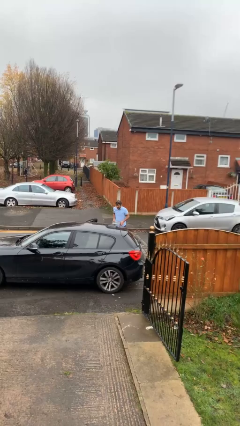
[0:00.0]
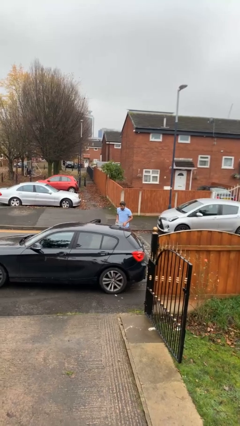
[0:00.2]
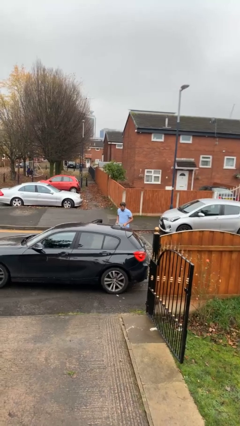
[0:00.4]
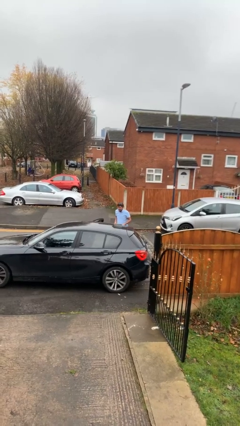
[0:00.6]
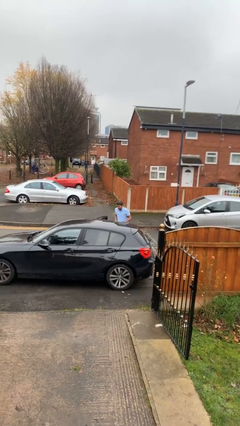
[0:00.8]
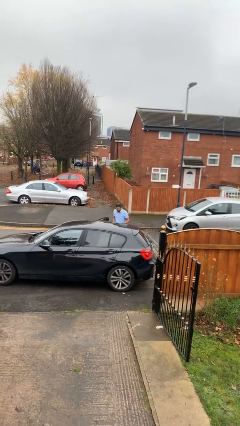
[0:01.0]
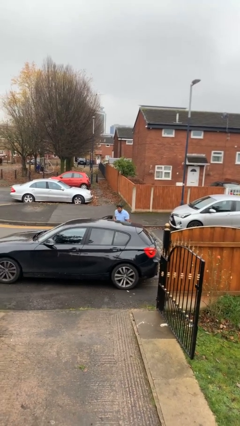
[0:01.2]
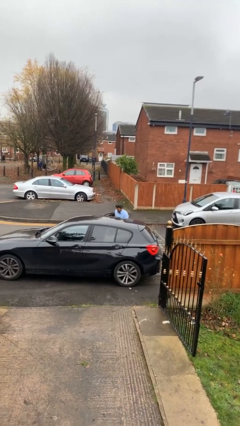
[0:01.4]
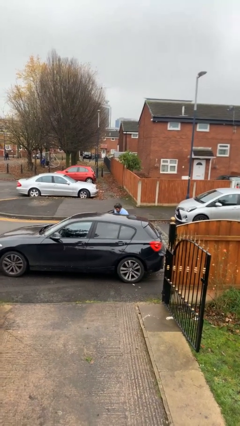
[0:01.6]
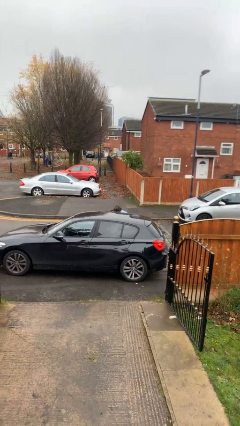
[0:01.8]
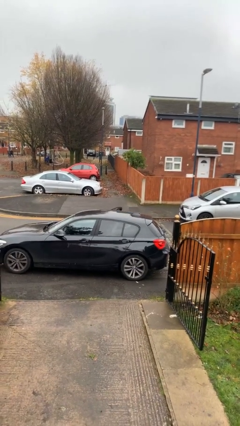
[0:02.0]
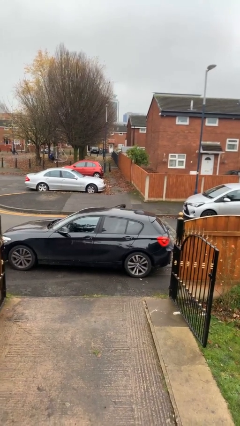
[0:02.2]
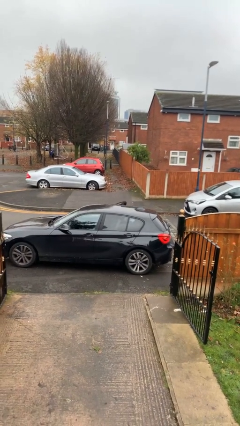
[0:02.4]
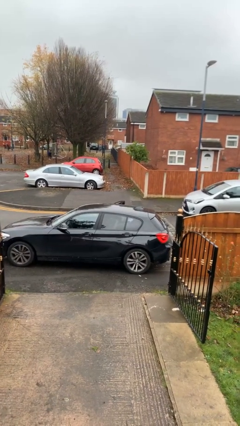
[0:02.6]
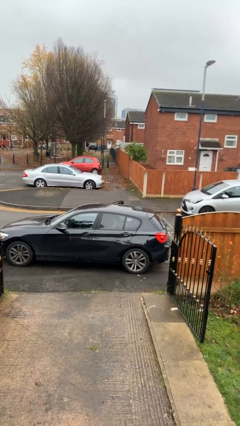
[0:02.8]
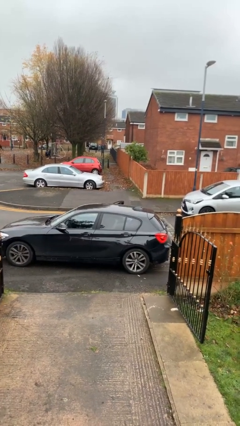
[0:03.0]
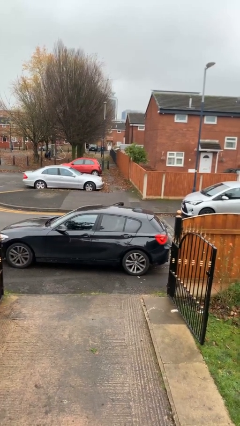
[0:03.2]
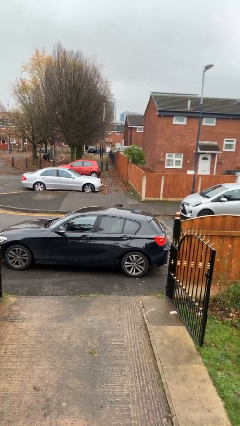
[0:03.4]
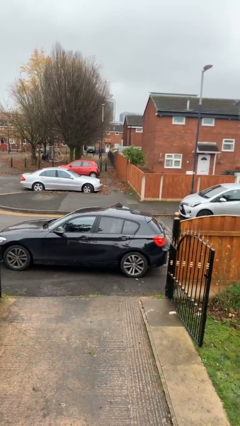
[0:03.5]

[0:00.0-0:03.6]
person loads car

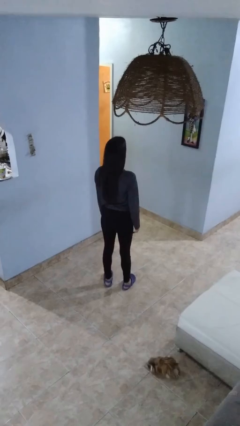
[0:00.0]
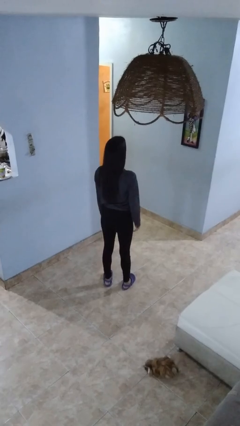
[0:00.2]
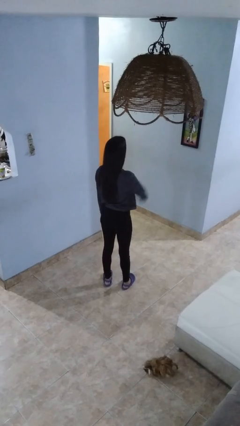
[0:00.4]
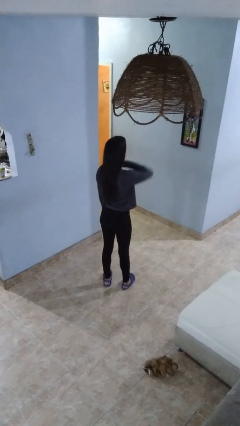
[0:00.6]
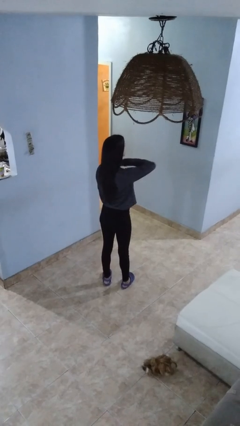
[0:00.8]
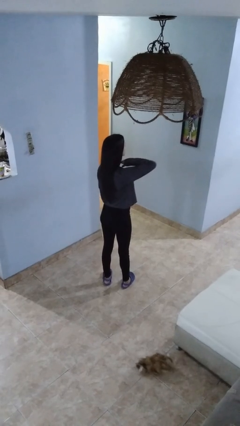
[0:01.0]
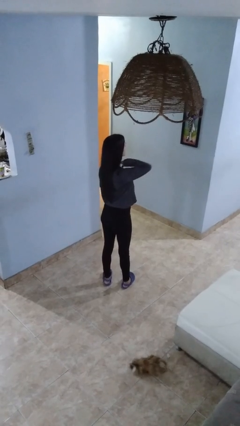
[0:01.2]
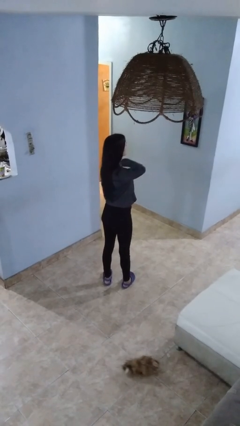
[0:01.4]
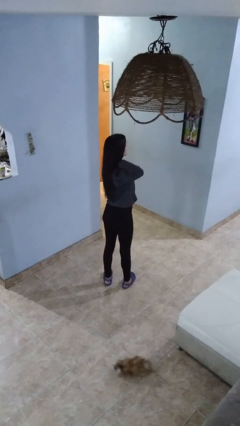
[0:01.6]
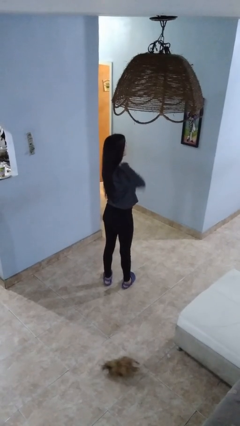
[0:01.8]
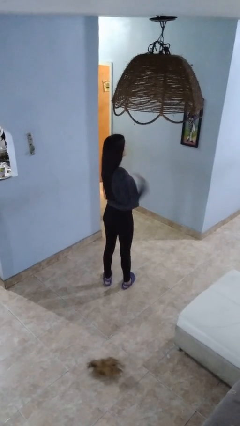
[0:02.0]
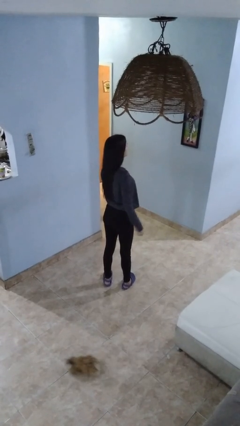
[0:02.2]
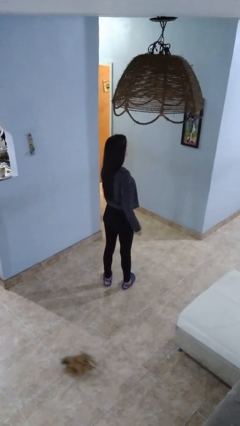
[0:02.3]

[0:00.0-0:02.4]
person gestures cut

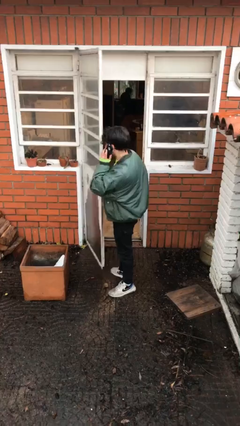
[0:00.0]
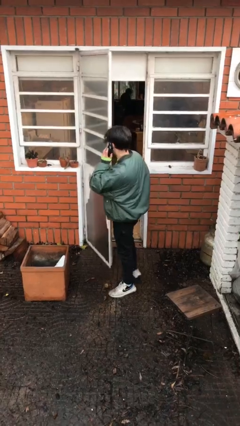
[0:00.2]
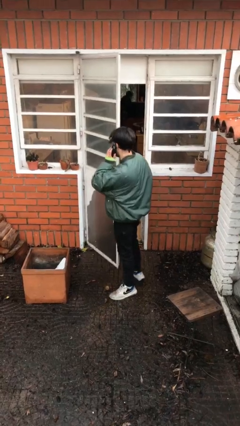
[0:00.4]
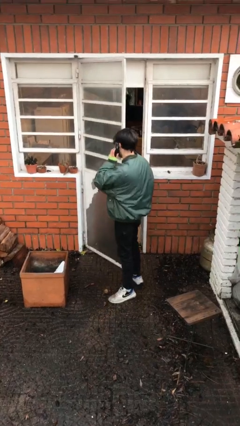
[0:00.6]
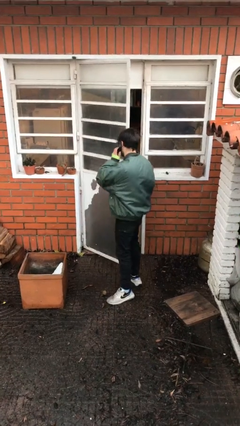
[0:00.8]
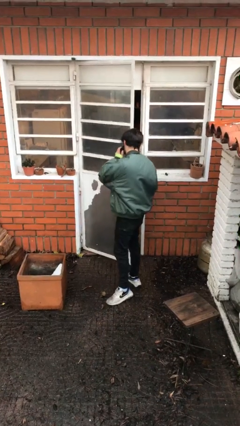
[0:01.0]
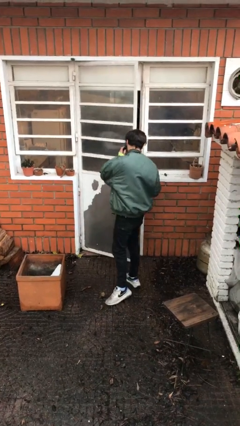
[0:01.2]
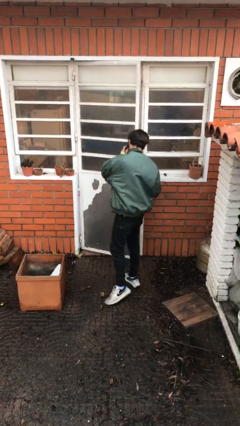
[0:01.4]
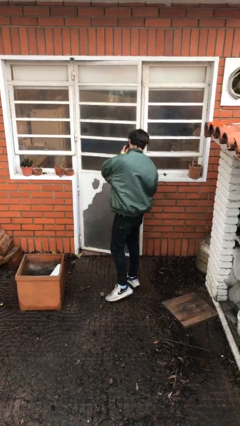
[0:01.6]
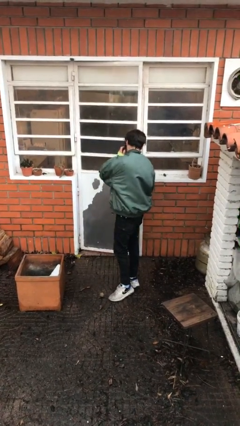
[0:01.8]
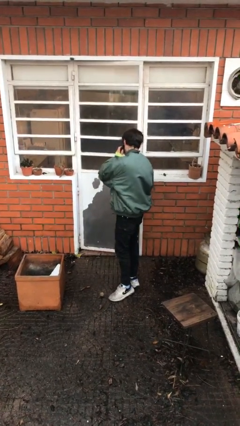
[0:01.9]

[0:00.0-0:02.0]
person closes facility door

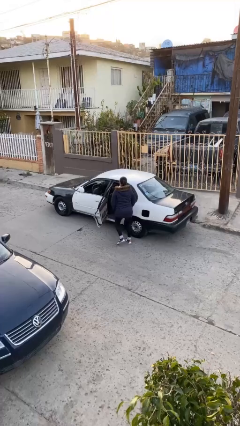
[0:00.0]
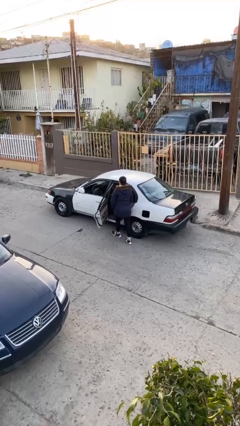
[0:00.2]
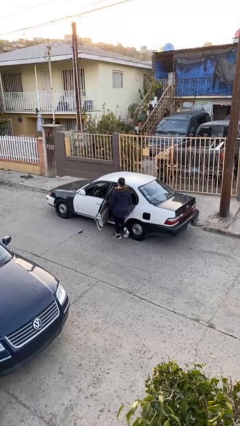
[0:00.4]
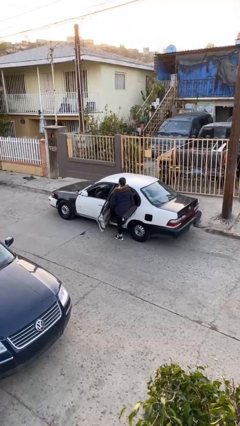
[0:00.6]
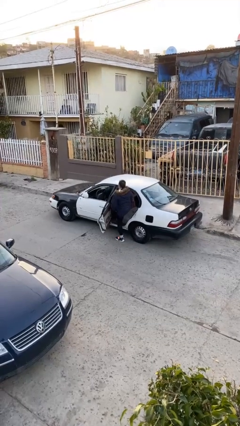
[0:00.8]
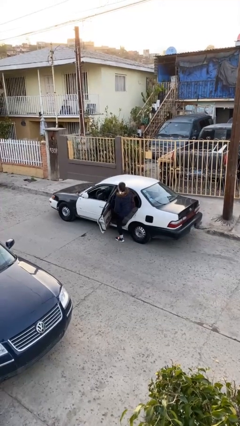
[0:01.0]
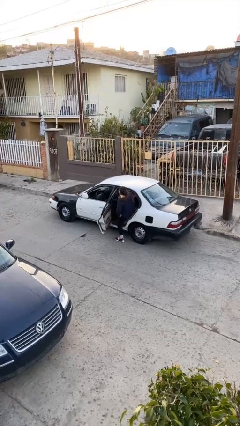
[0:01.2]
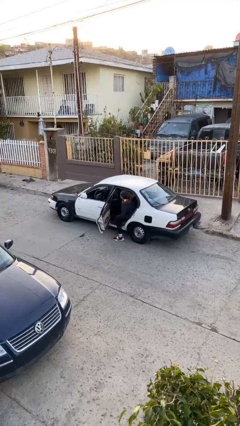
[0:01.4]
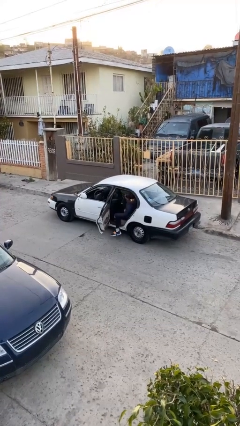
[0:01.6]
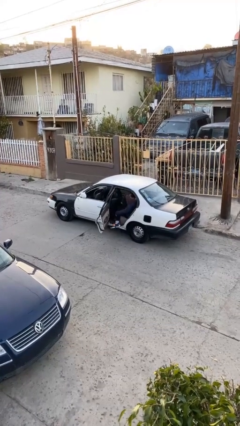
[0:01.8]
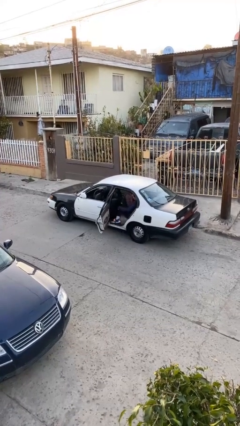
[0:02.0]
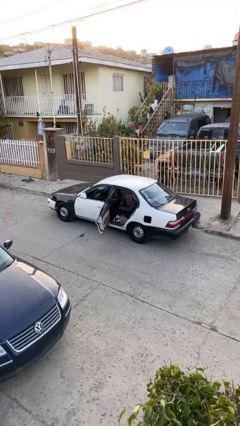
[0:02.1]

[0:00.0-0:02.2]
person enters car

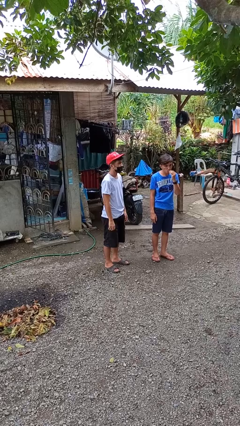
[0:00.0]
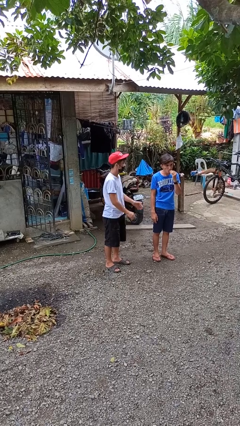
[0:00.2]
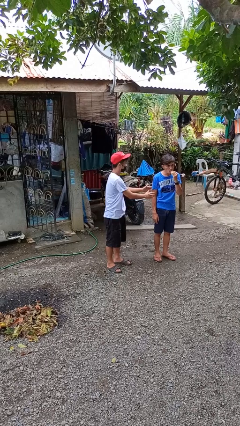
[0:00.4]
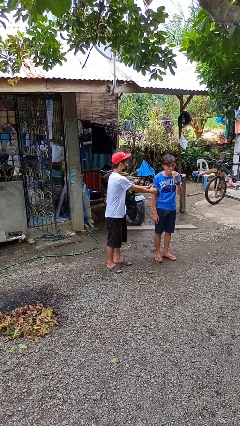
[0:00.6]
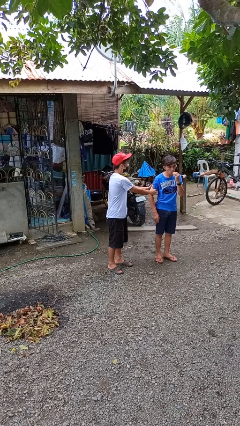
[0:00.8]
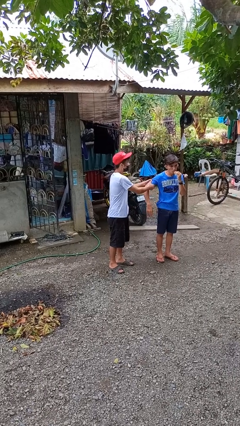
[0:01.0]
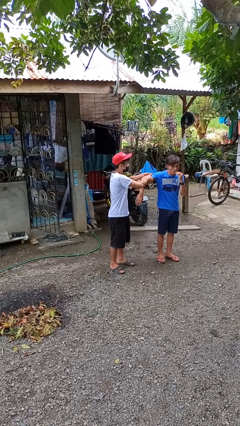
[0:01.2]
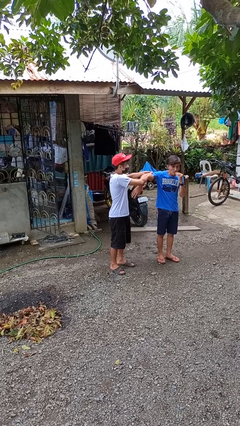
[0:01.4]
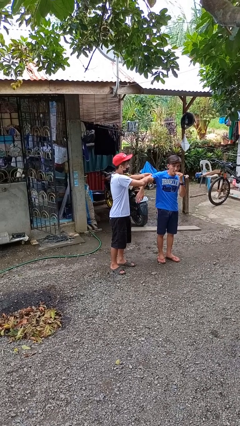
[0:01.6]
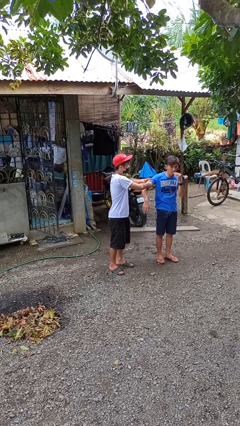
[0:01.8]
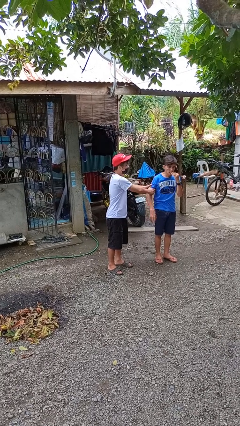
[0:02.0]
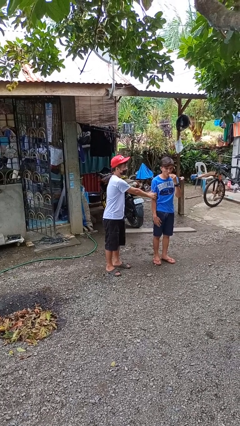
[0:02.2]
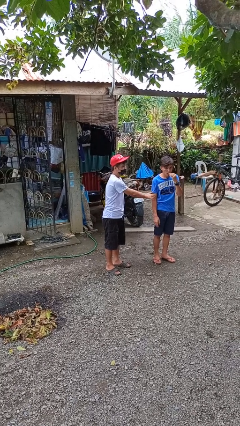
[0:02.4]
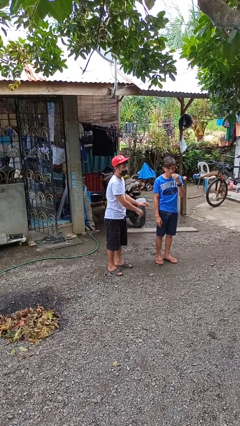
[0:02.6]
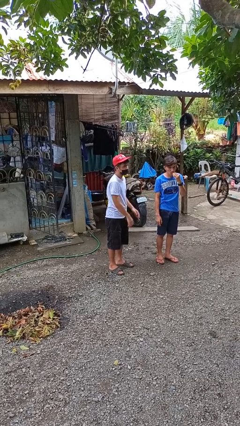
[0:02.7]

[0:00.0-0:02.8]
person grabs person by bicep

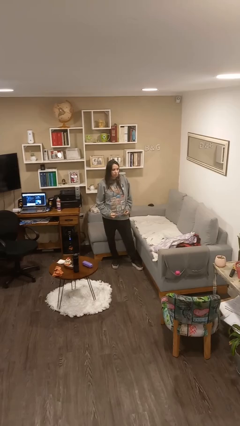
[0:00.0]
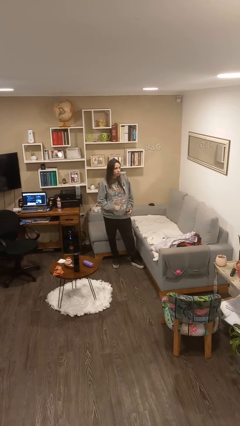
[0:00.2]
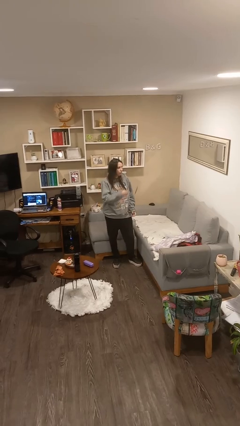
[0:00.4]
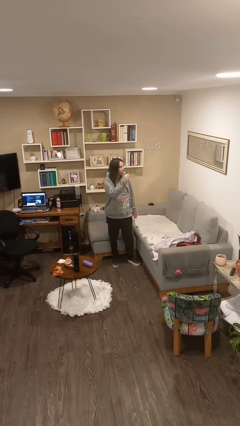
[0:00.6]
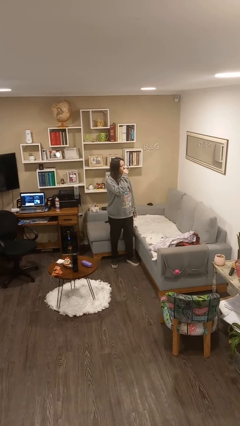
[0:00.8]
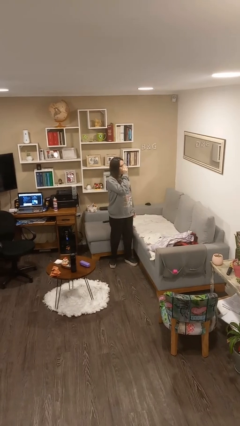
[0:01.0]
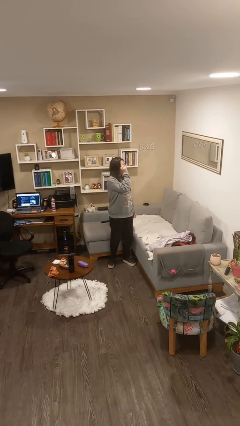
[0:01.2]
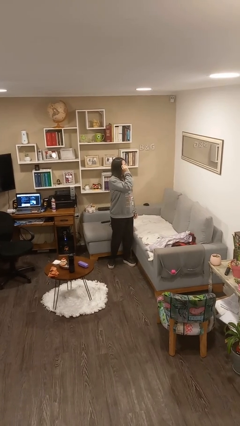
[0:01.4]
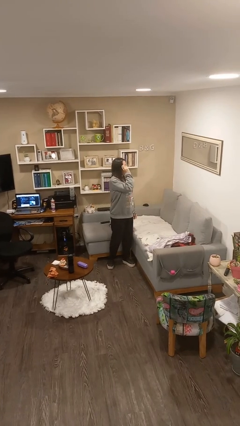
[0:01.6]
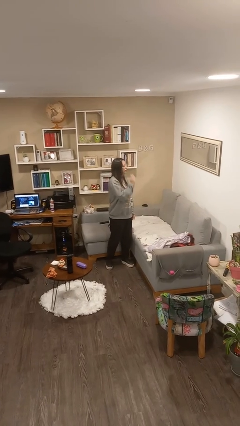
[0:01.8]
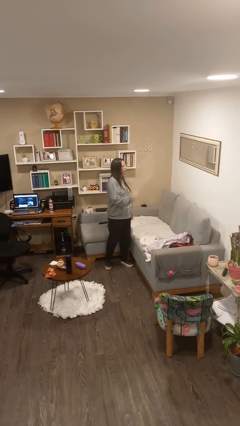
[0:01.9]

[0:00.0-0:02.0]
person puts on glasses

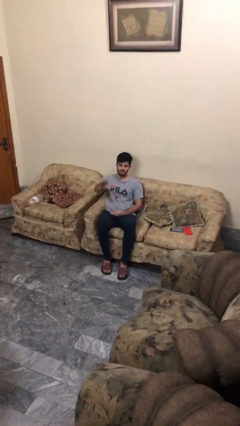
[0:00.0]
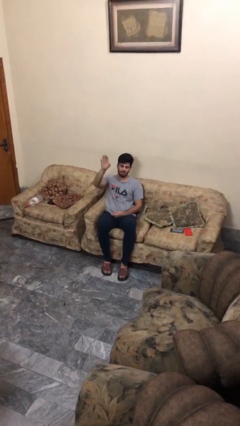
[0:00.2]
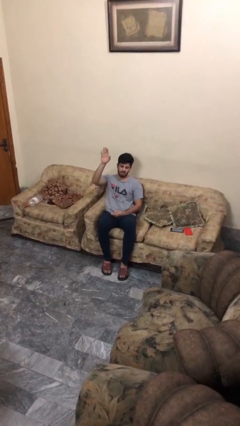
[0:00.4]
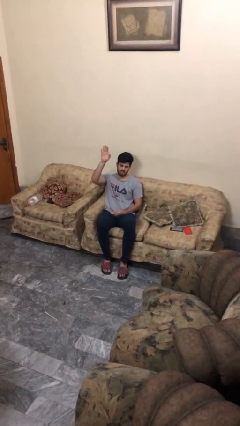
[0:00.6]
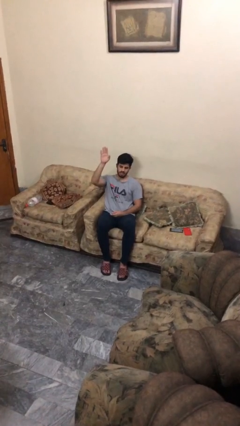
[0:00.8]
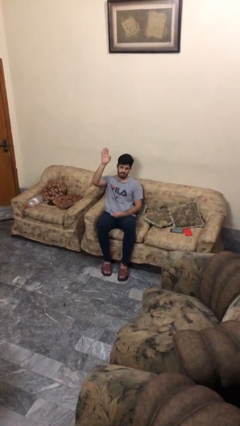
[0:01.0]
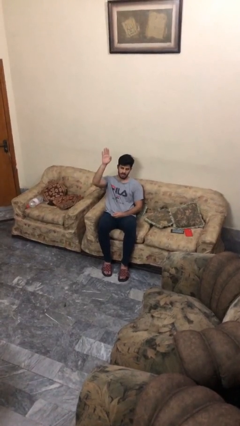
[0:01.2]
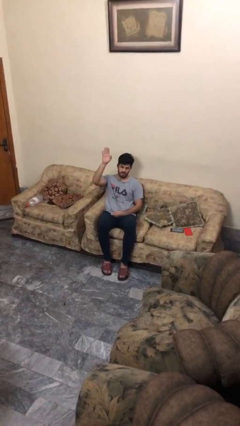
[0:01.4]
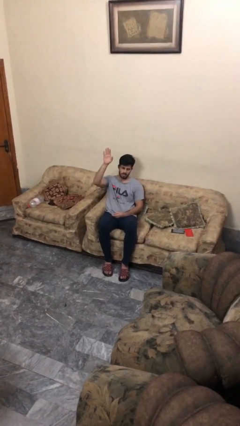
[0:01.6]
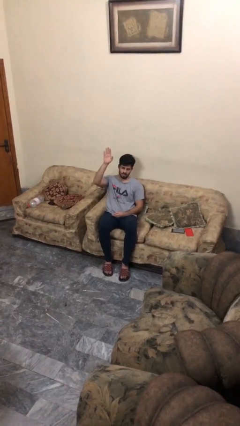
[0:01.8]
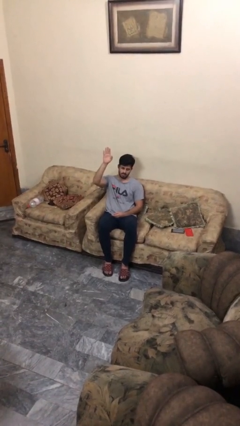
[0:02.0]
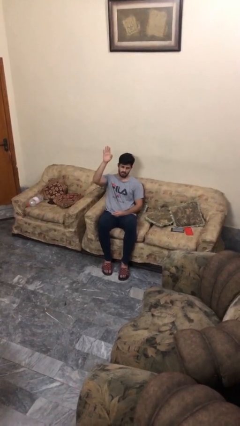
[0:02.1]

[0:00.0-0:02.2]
person gestures raise hand
